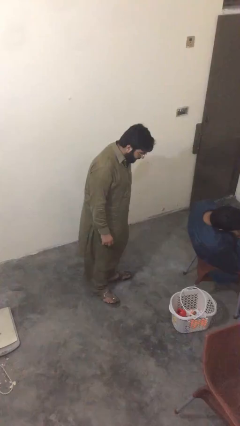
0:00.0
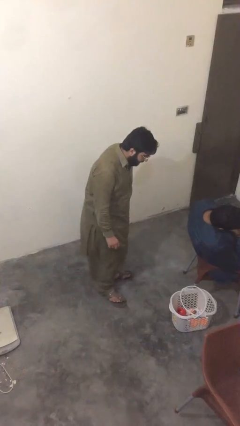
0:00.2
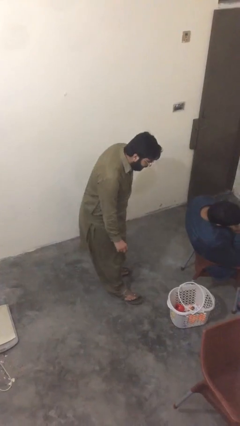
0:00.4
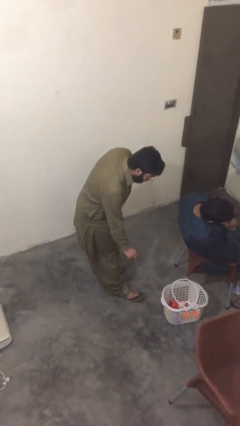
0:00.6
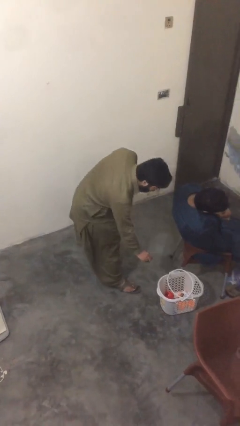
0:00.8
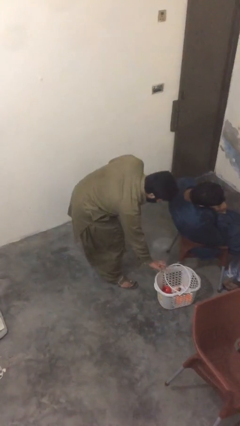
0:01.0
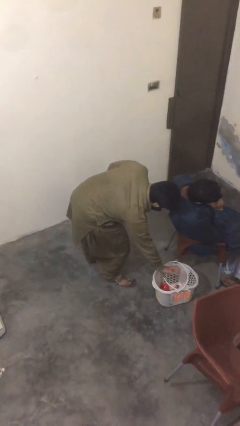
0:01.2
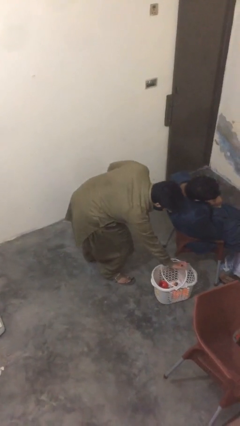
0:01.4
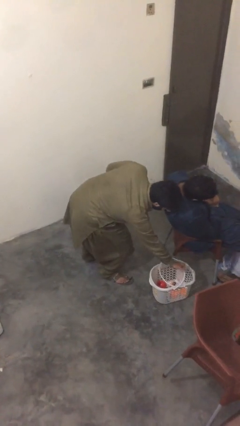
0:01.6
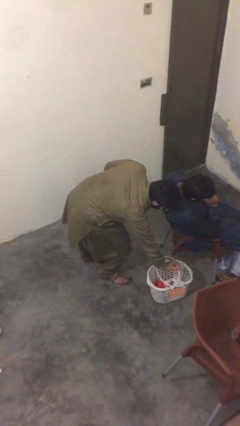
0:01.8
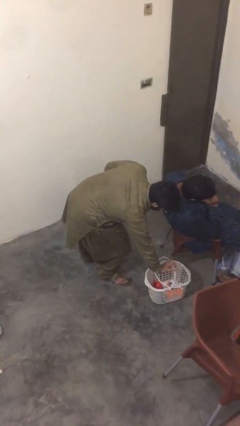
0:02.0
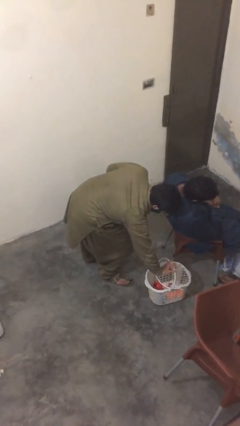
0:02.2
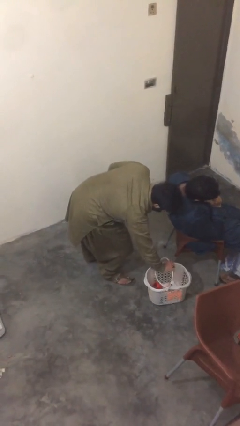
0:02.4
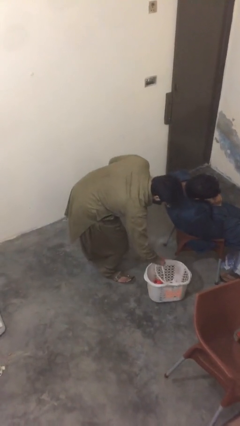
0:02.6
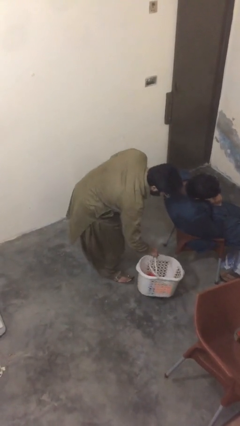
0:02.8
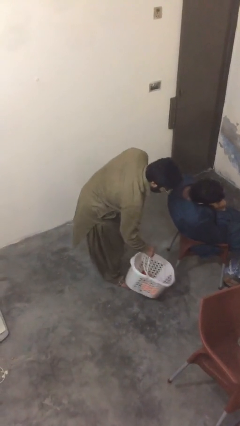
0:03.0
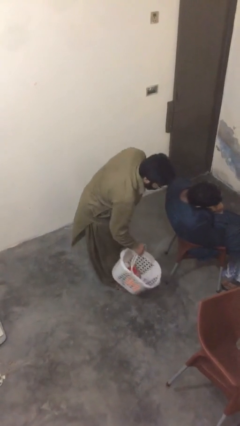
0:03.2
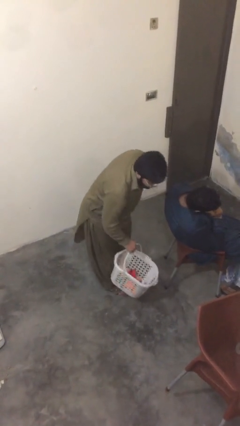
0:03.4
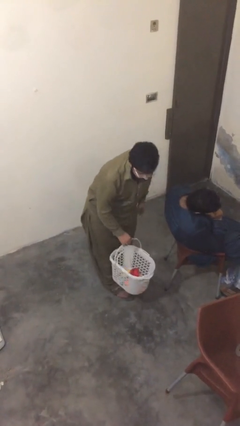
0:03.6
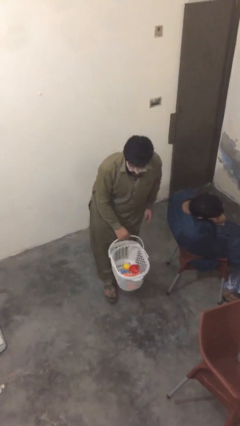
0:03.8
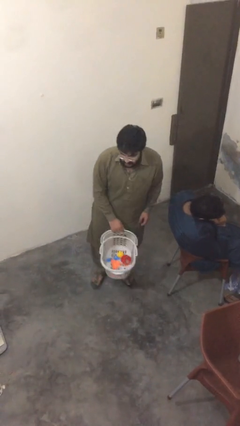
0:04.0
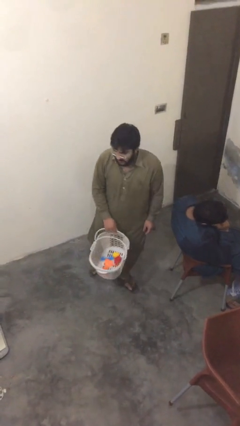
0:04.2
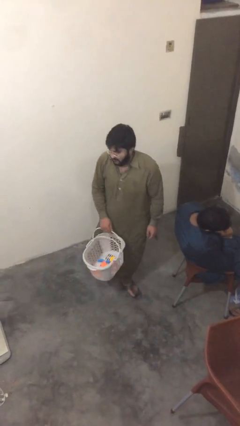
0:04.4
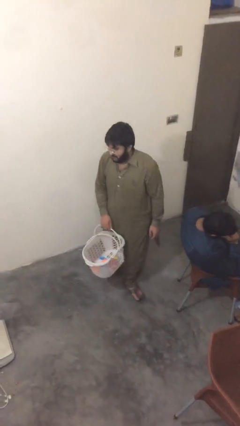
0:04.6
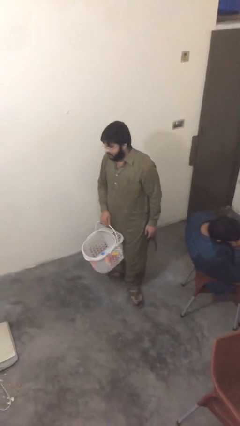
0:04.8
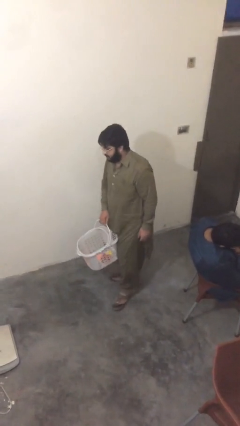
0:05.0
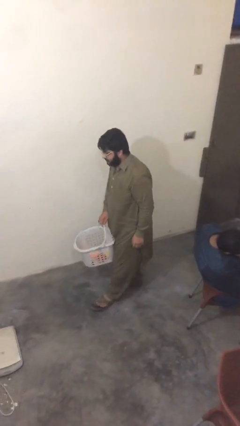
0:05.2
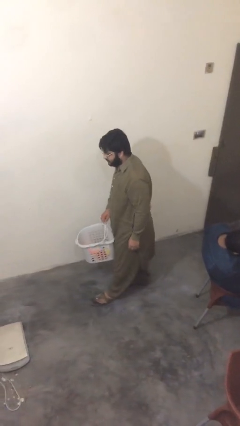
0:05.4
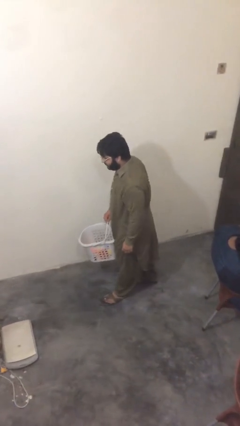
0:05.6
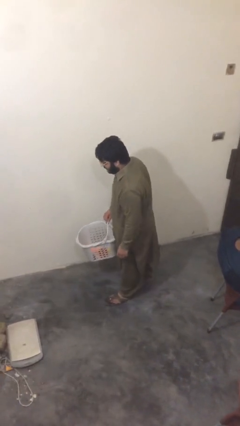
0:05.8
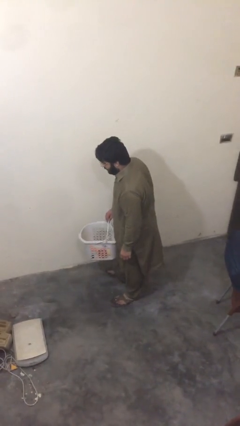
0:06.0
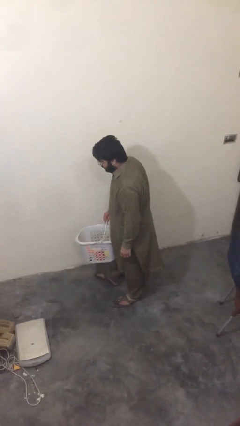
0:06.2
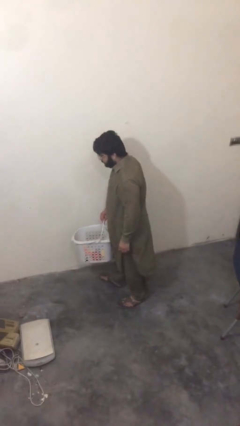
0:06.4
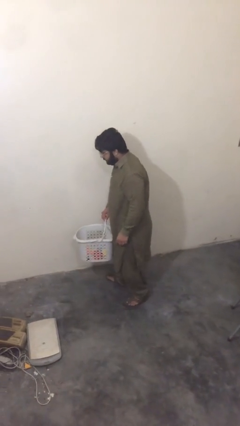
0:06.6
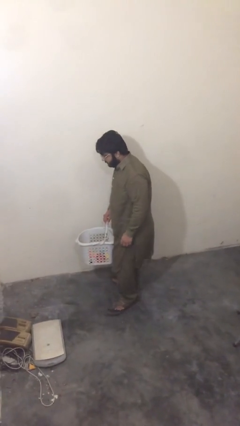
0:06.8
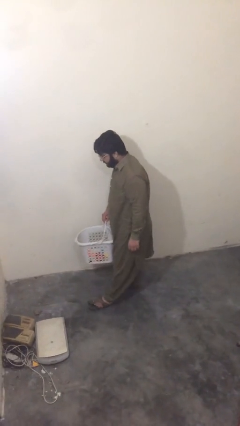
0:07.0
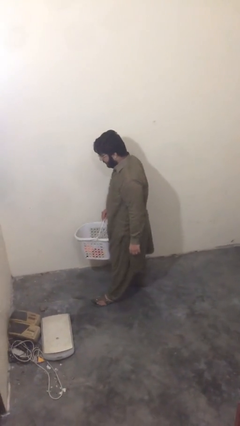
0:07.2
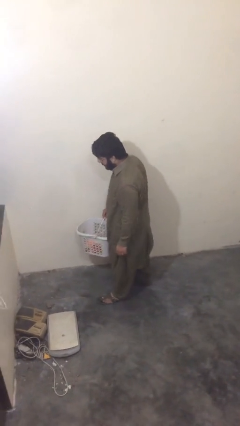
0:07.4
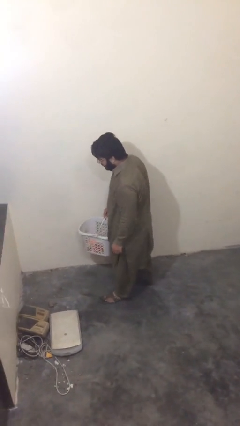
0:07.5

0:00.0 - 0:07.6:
person steals object from person

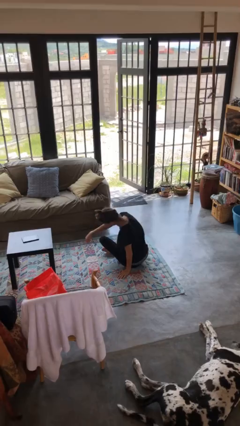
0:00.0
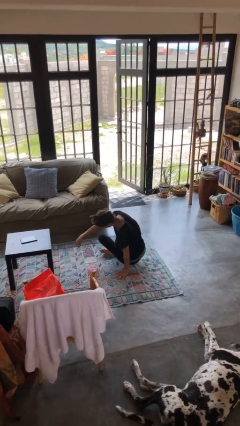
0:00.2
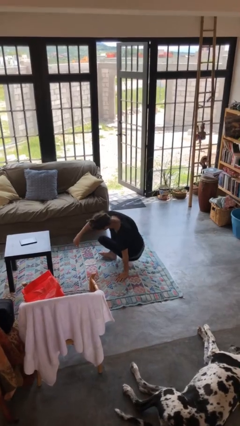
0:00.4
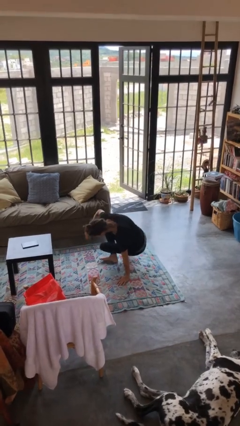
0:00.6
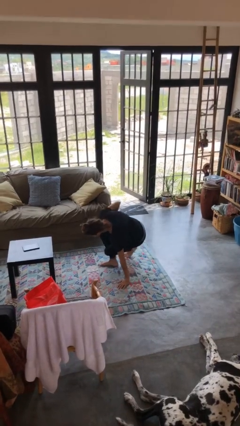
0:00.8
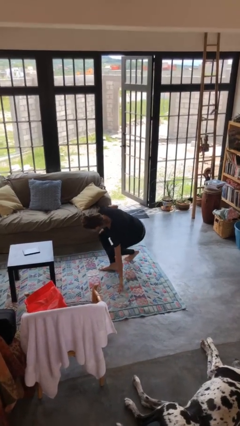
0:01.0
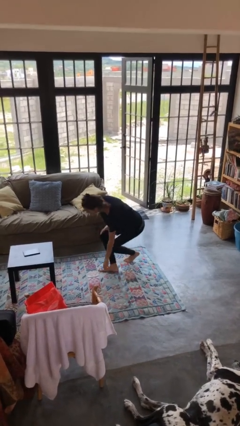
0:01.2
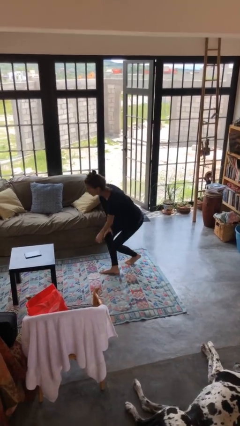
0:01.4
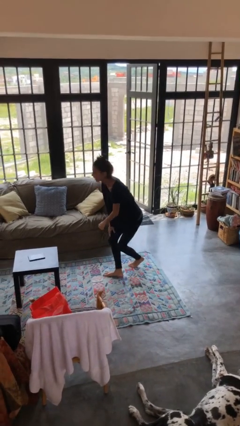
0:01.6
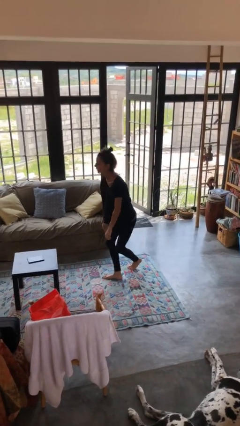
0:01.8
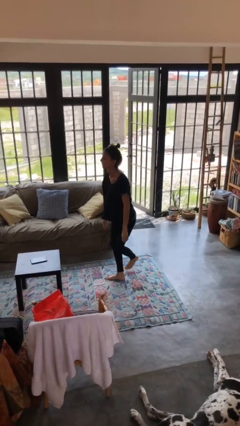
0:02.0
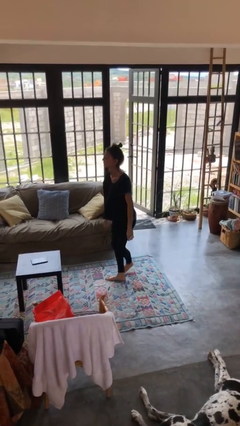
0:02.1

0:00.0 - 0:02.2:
person stands up from floor

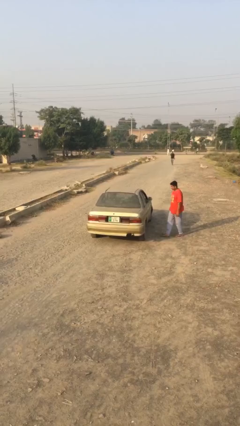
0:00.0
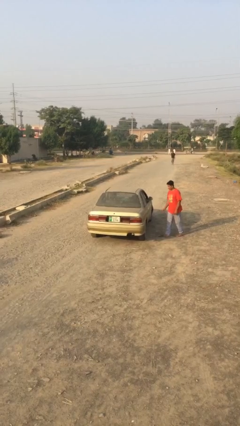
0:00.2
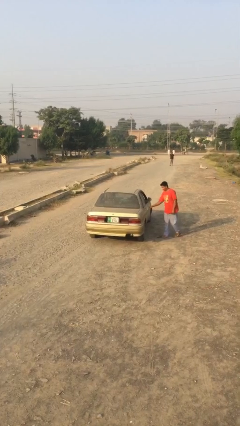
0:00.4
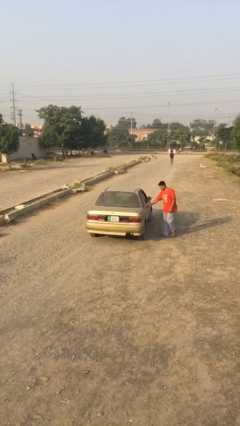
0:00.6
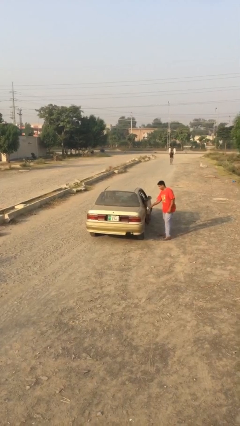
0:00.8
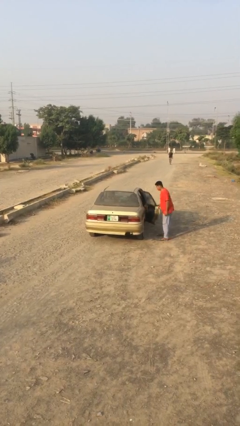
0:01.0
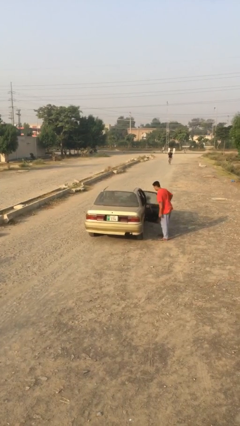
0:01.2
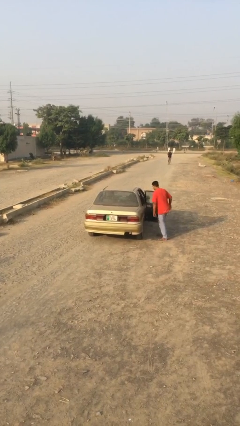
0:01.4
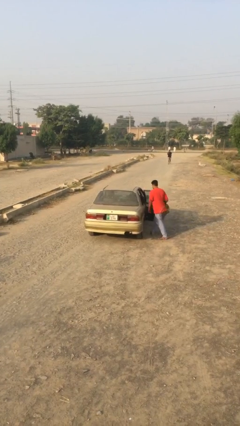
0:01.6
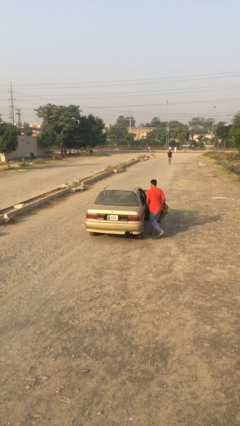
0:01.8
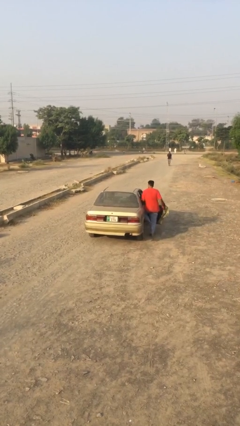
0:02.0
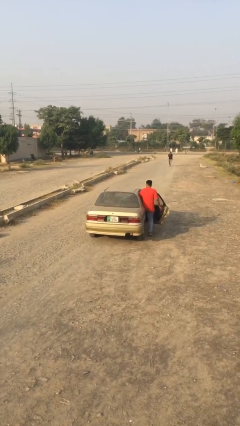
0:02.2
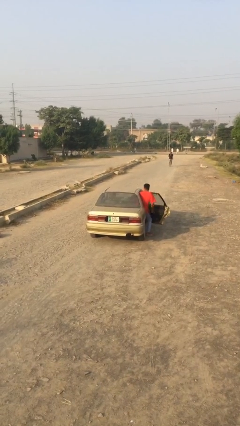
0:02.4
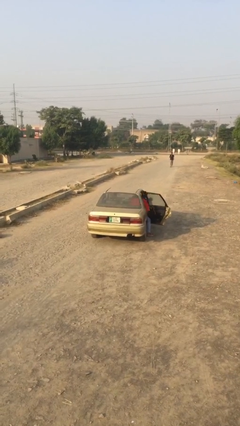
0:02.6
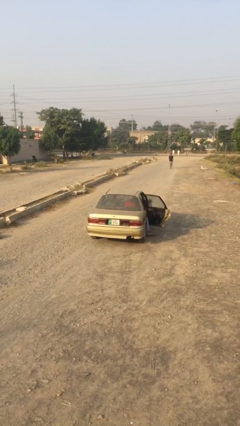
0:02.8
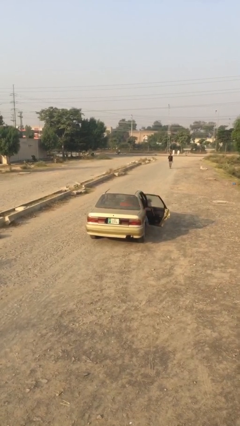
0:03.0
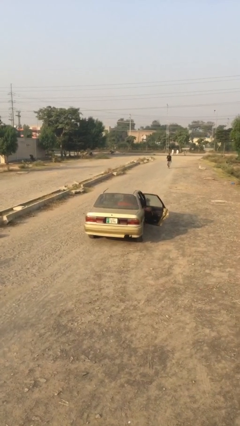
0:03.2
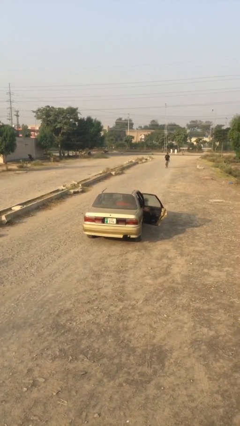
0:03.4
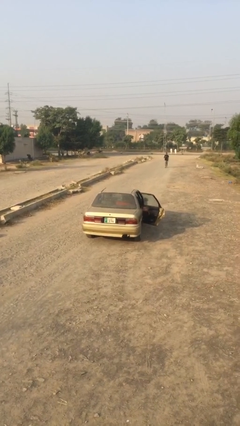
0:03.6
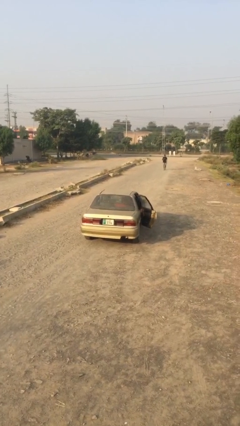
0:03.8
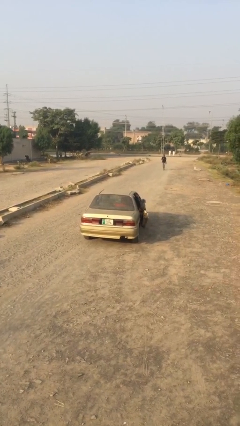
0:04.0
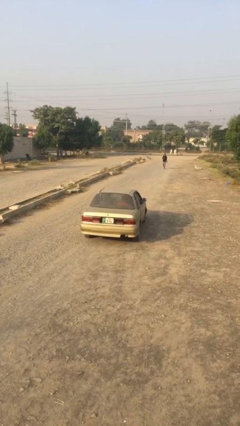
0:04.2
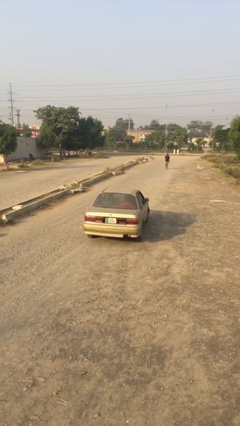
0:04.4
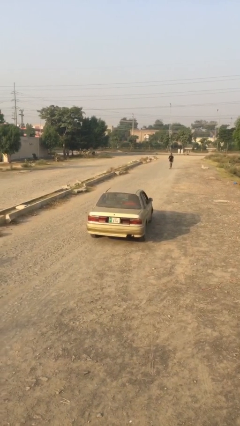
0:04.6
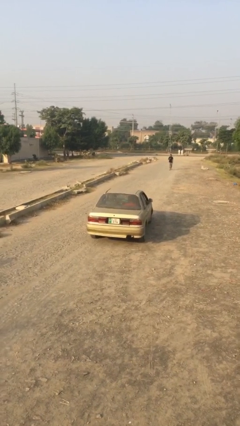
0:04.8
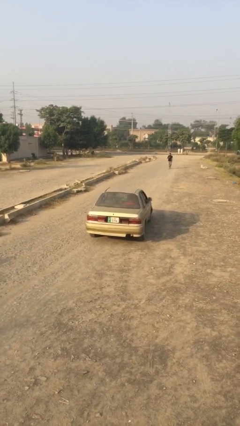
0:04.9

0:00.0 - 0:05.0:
car picks up person

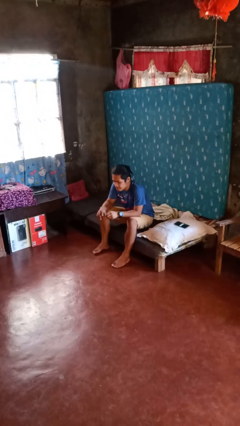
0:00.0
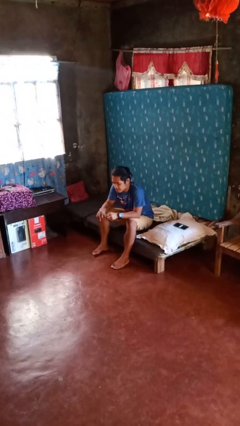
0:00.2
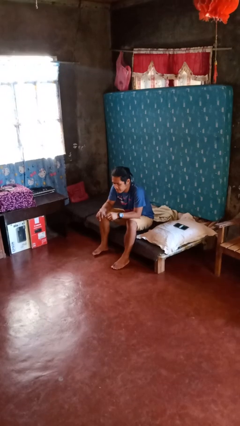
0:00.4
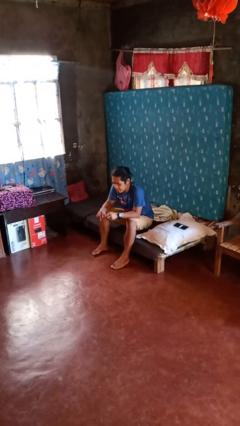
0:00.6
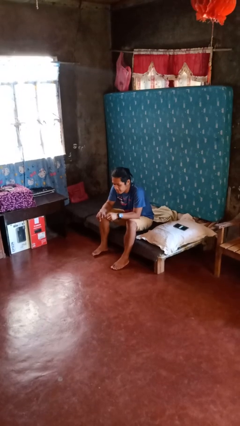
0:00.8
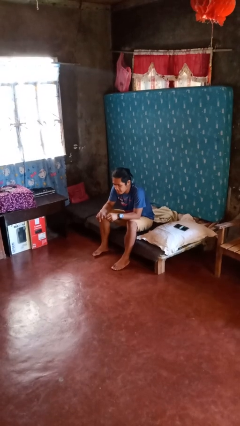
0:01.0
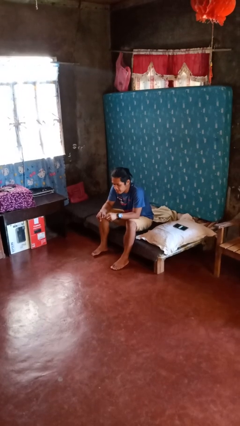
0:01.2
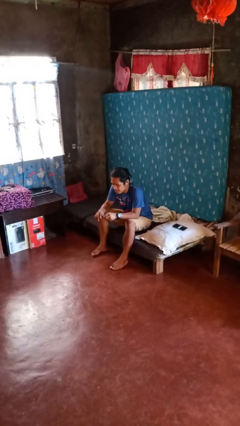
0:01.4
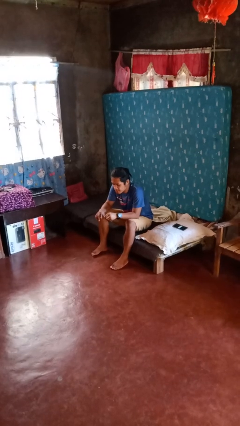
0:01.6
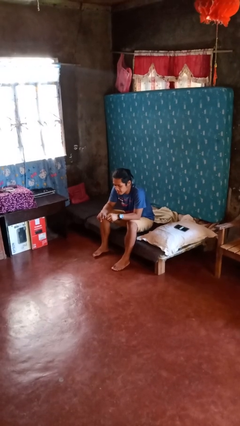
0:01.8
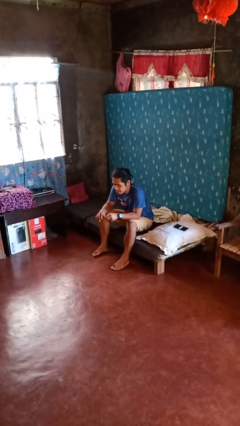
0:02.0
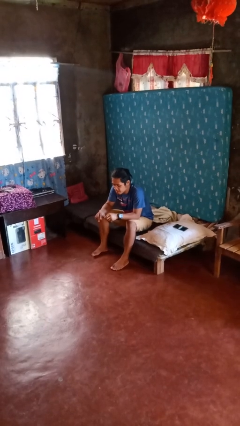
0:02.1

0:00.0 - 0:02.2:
person files fingernails

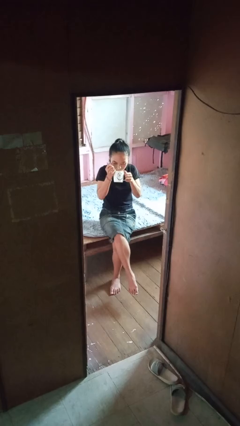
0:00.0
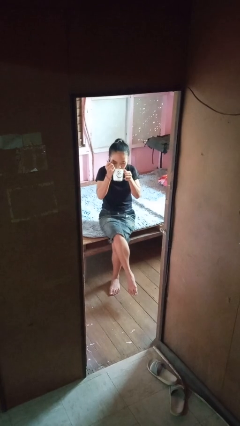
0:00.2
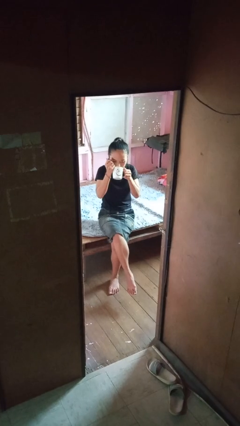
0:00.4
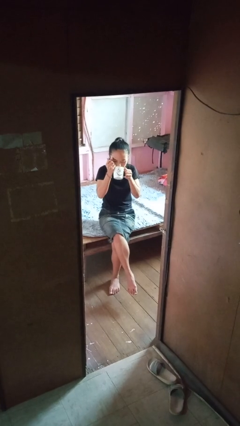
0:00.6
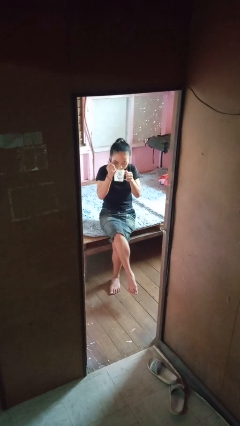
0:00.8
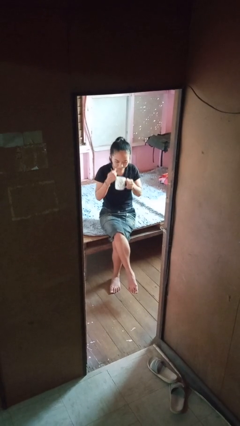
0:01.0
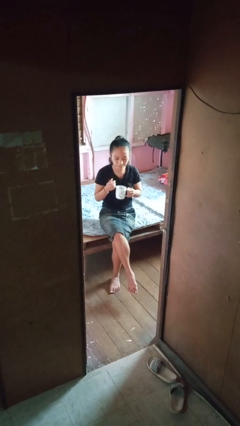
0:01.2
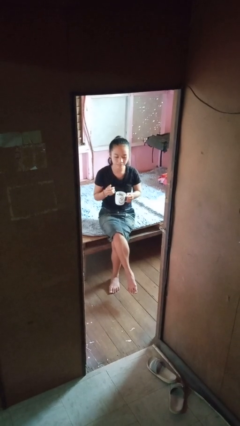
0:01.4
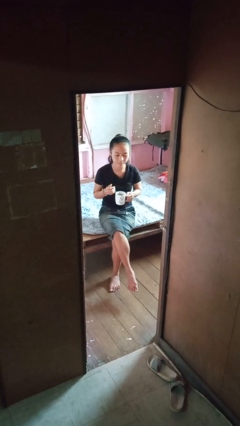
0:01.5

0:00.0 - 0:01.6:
person drinks from mug
